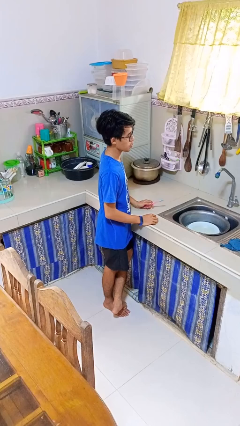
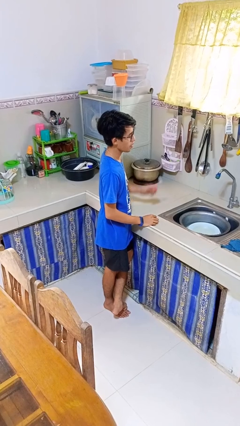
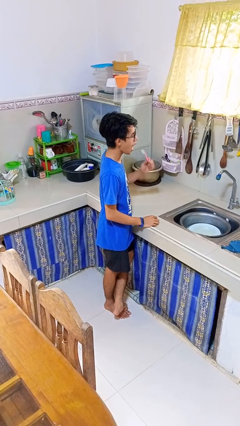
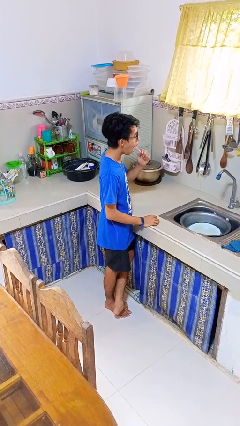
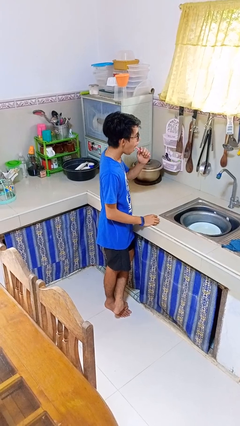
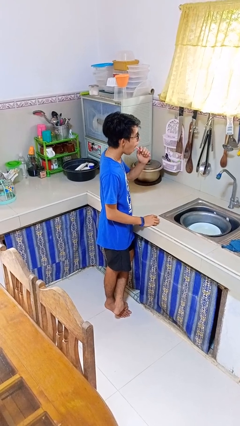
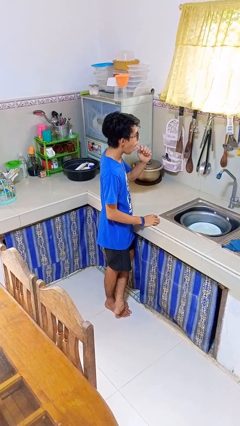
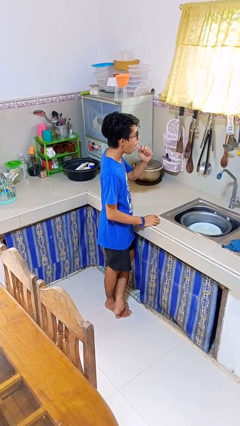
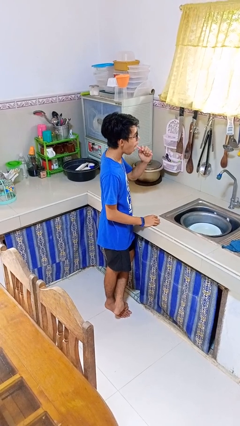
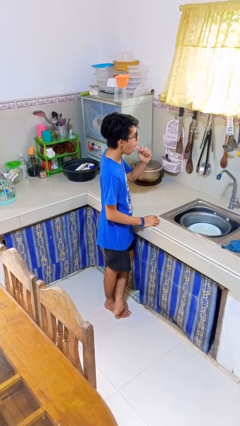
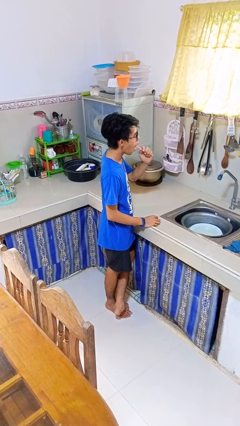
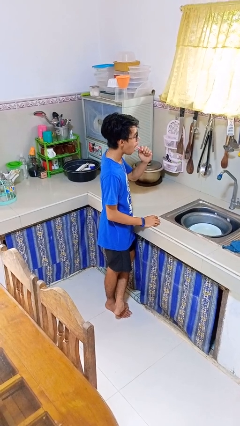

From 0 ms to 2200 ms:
person brushes teeth

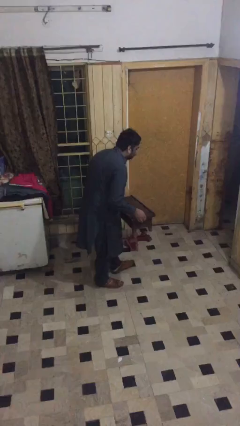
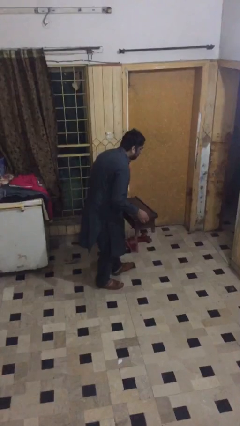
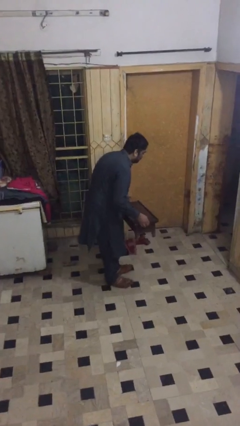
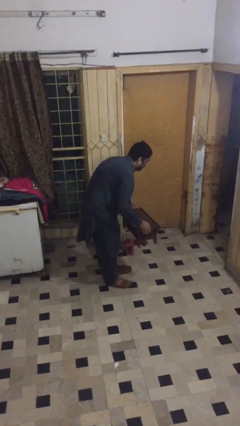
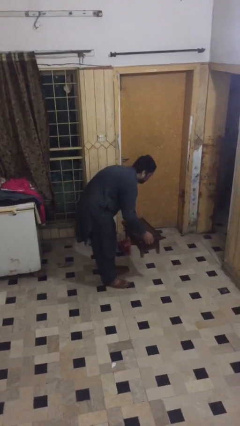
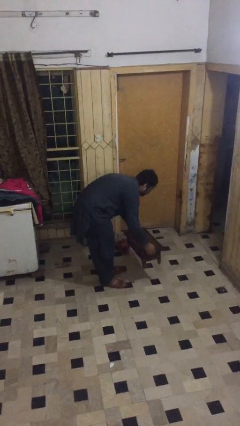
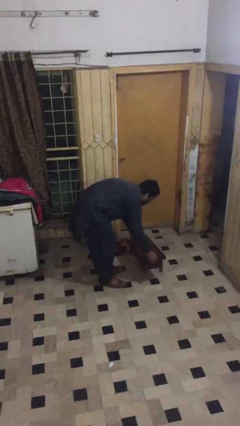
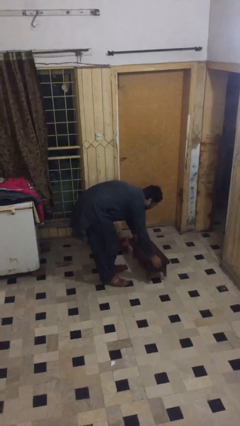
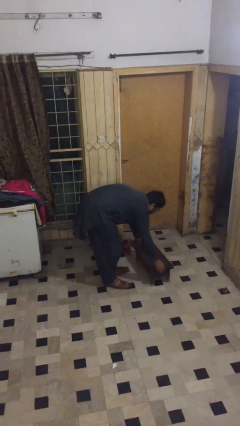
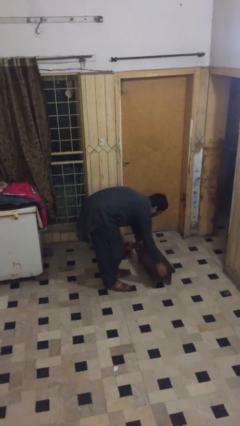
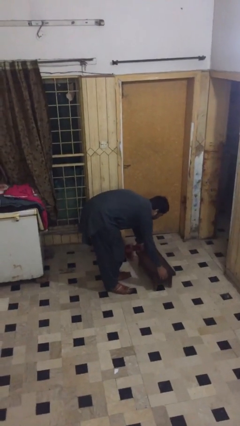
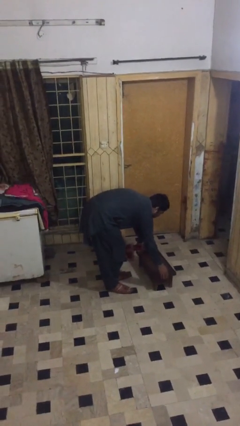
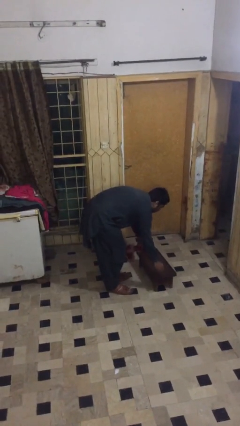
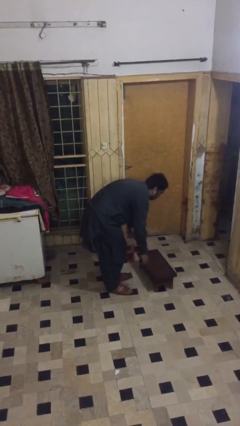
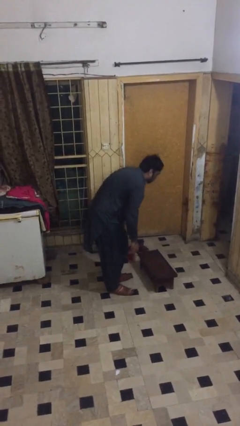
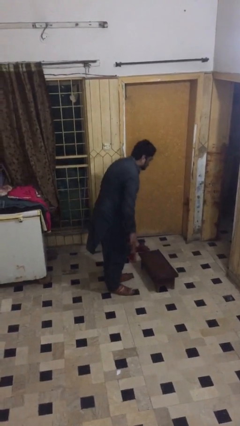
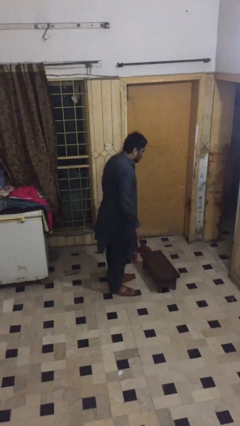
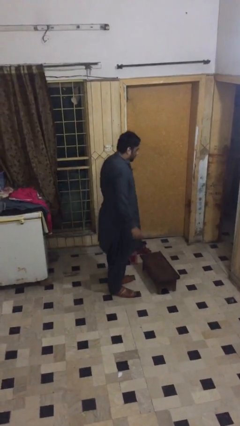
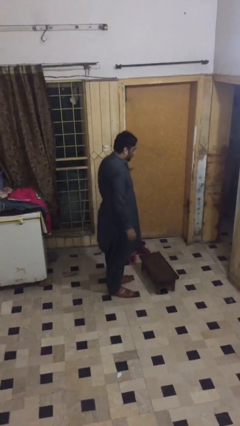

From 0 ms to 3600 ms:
person puts down object on floor

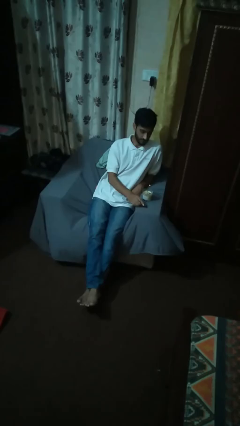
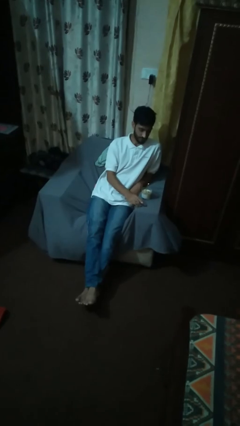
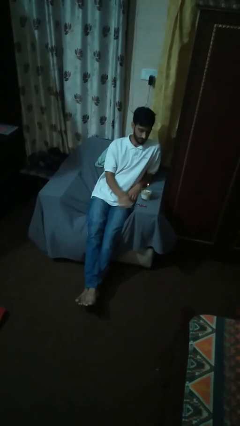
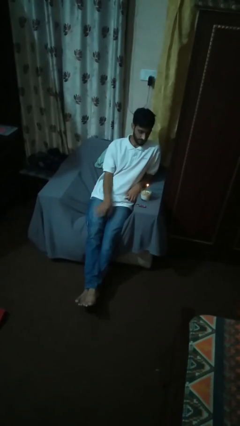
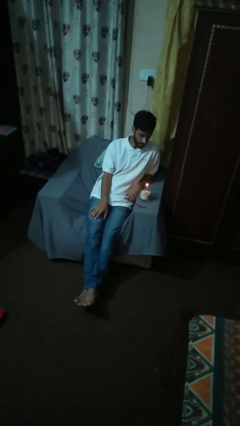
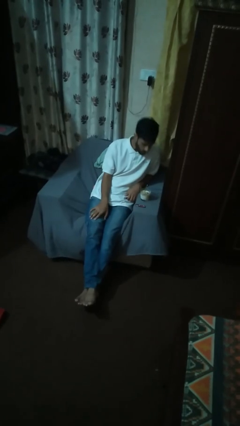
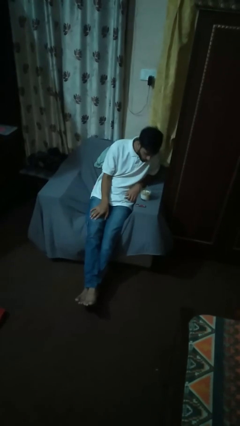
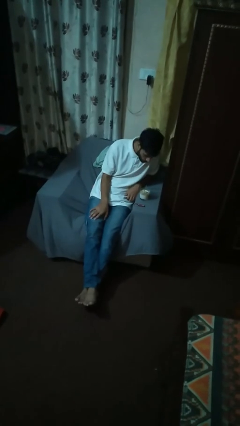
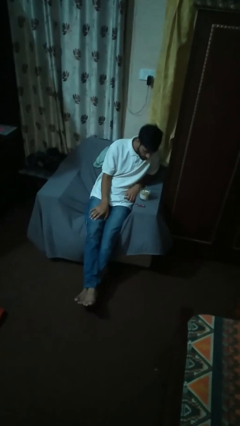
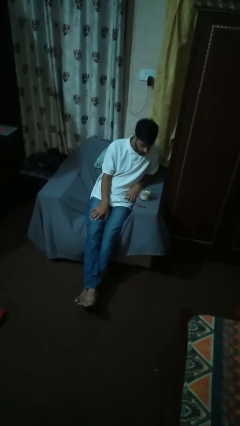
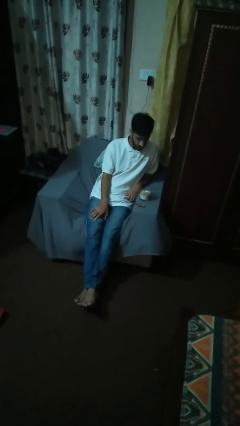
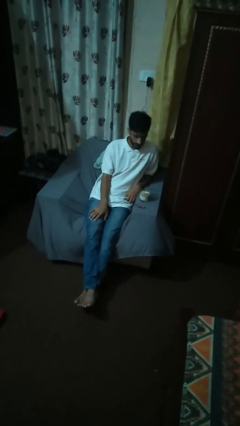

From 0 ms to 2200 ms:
person extinguishes candle

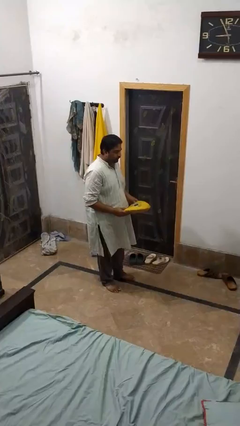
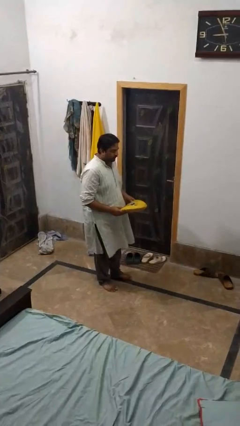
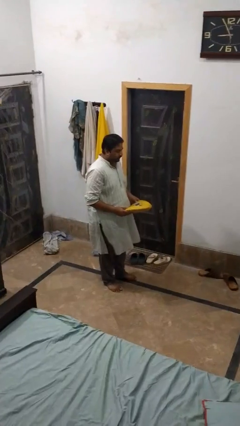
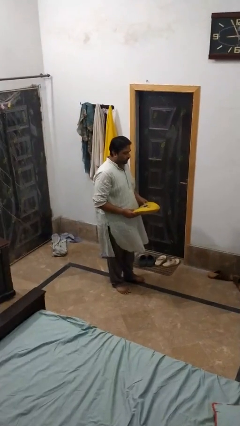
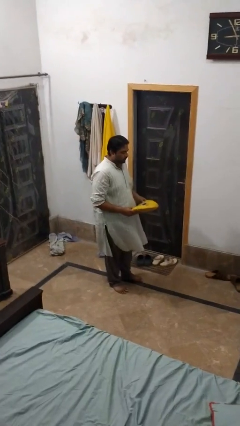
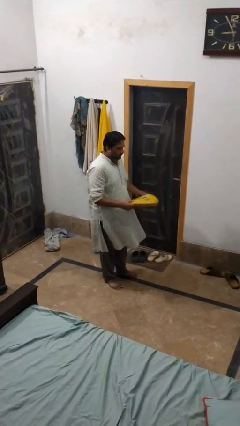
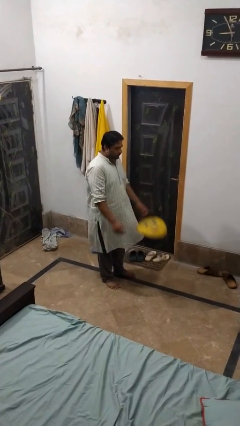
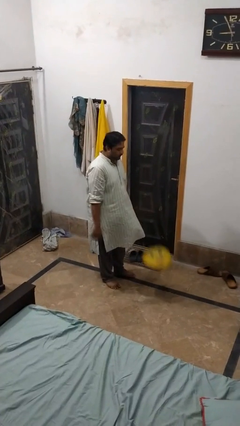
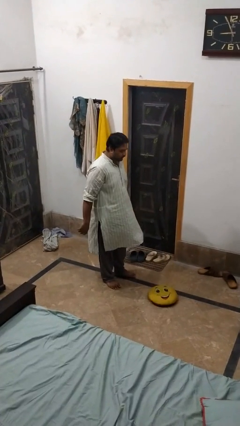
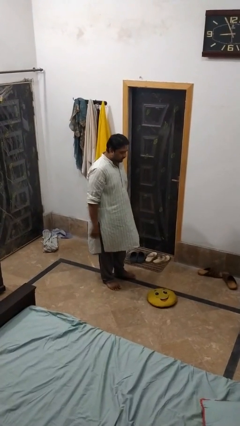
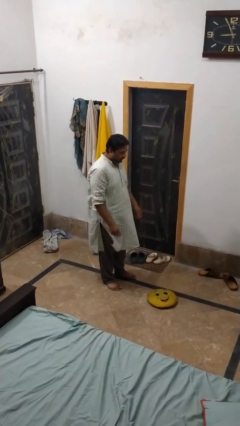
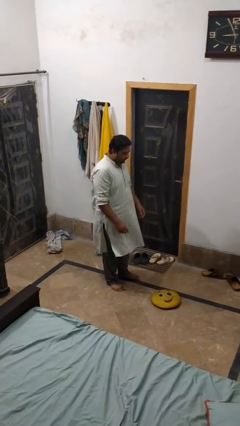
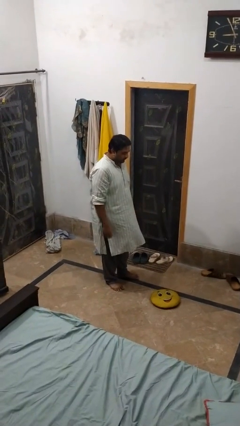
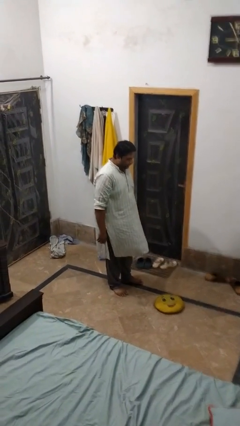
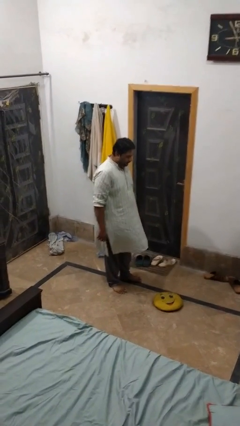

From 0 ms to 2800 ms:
person throws object to ground

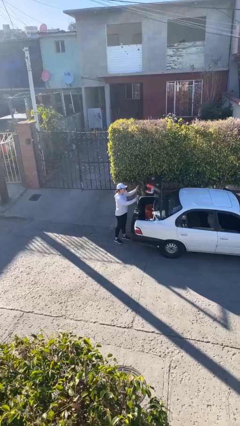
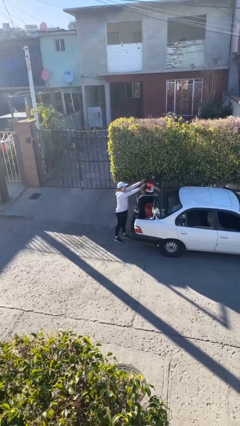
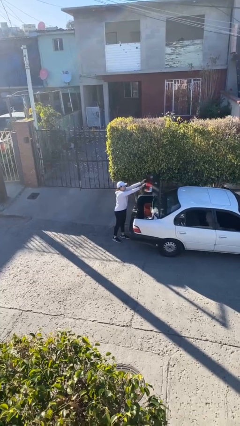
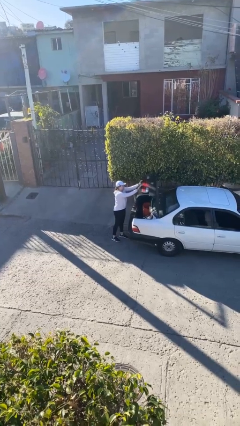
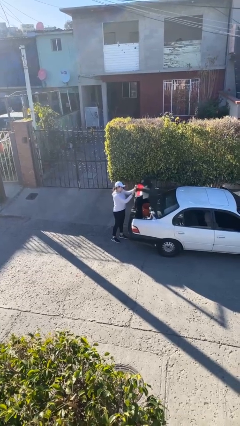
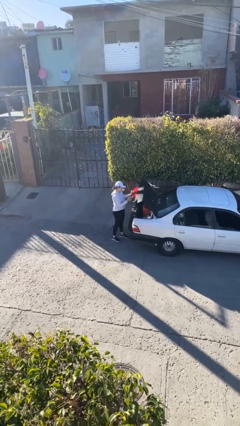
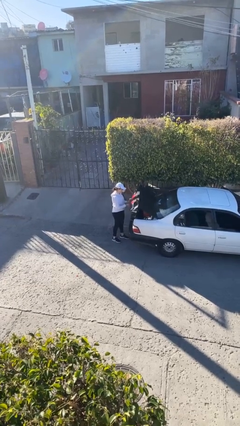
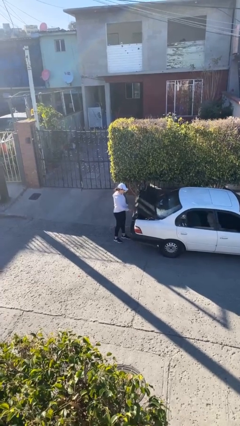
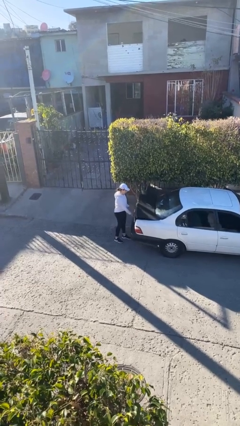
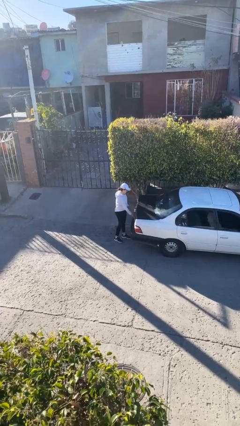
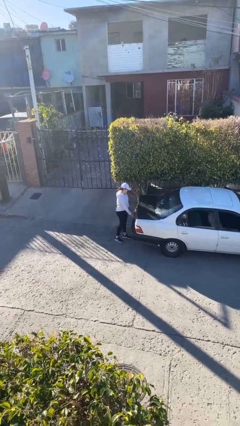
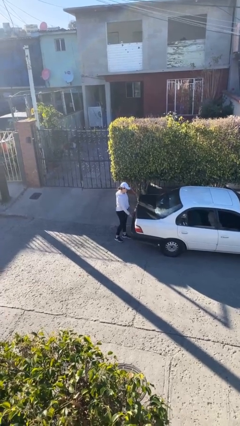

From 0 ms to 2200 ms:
person closes car trunk

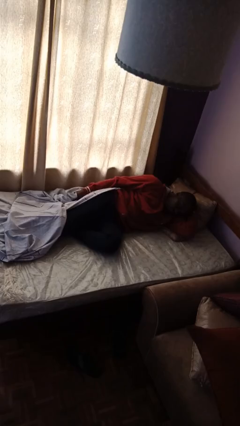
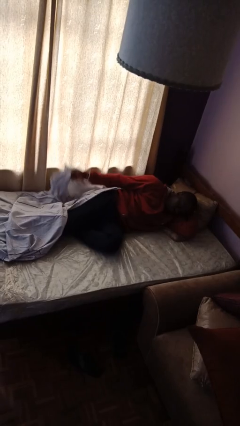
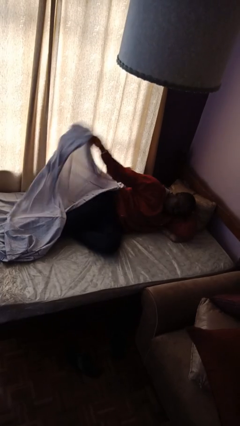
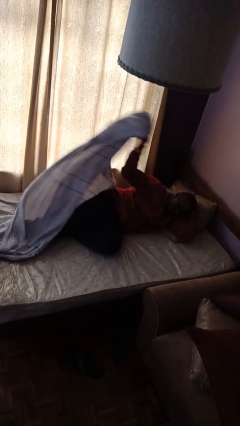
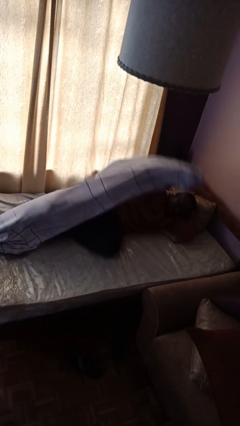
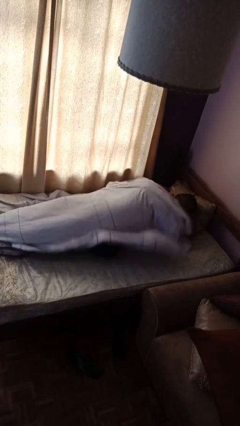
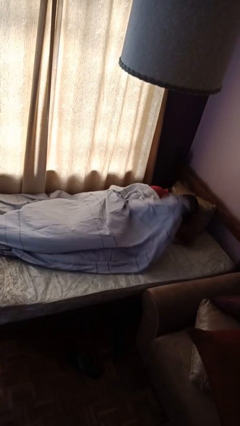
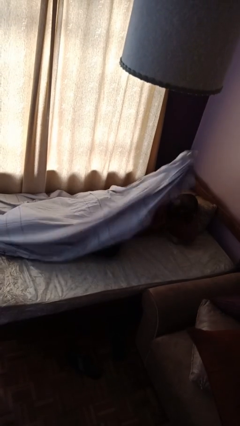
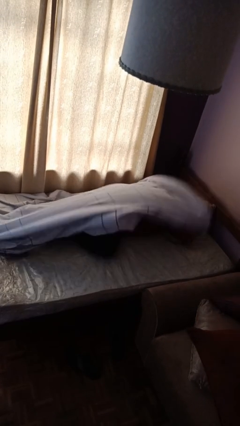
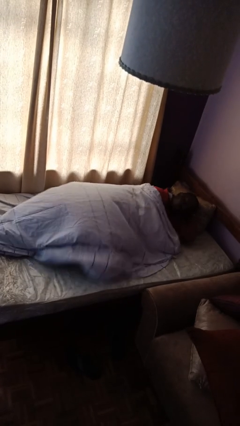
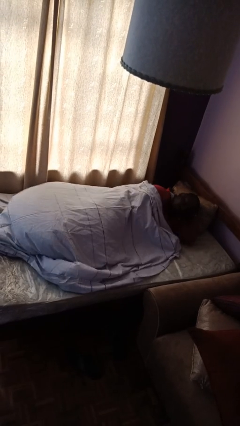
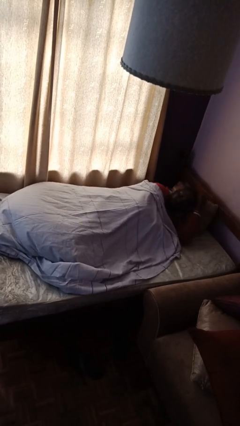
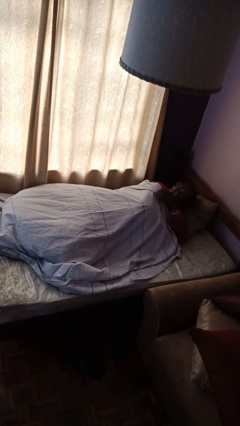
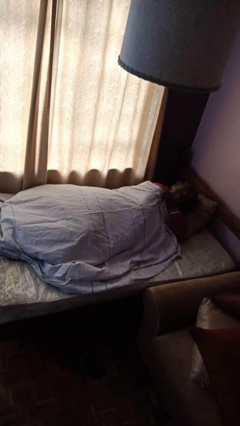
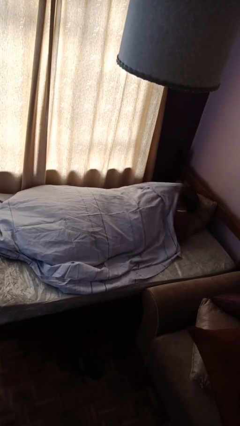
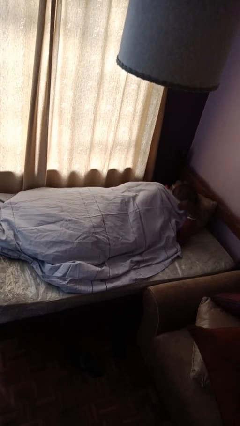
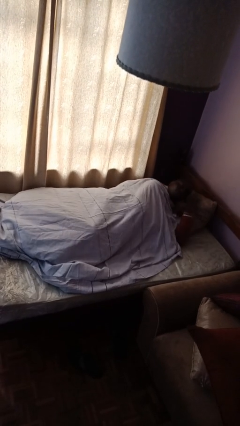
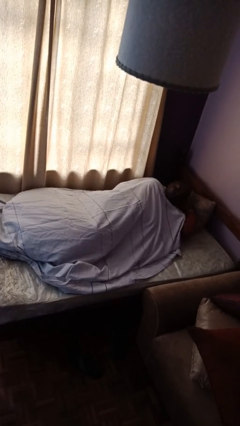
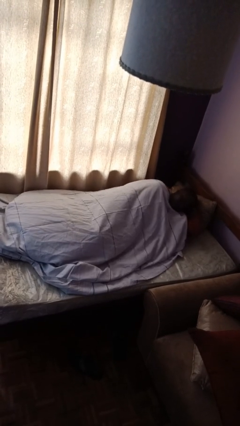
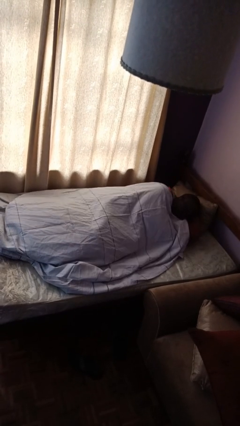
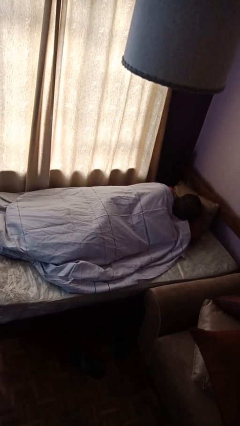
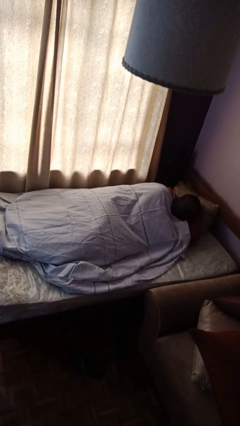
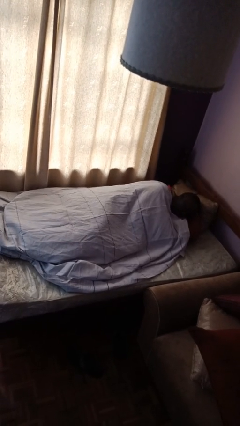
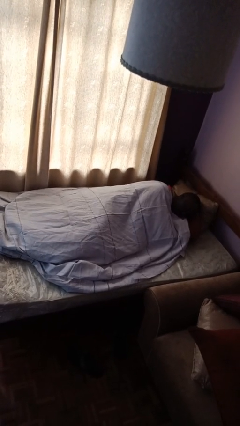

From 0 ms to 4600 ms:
person covers with bedsheets
